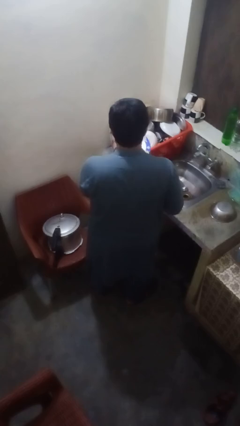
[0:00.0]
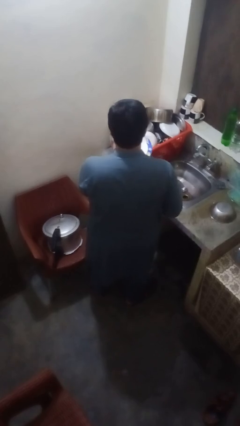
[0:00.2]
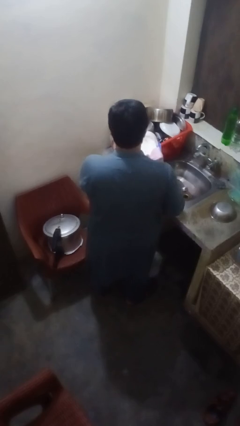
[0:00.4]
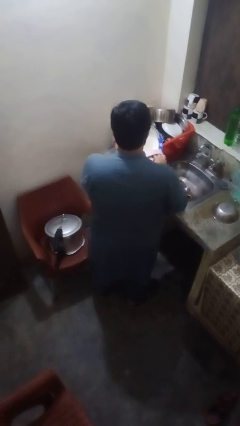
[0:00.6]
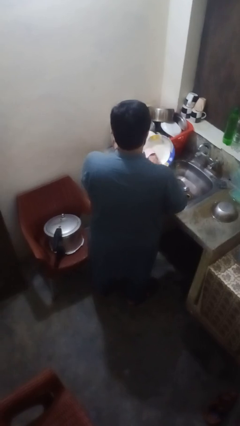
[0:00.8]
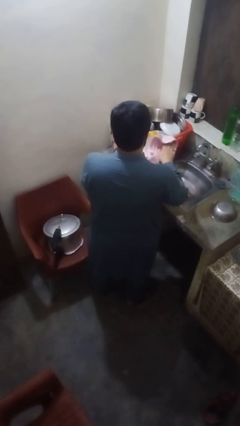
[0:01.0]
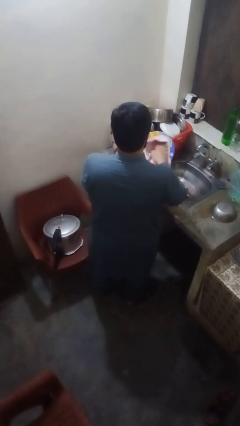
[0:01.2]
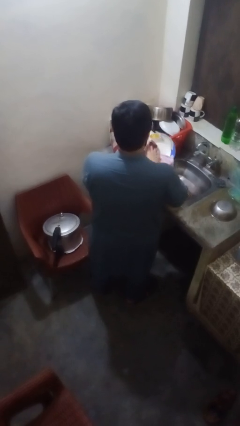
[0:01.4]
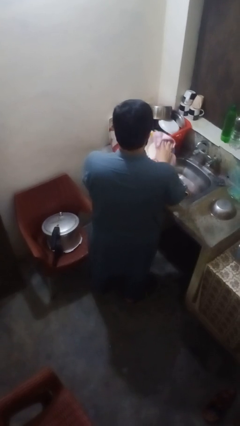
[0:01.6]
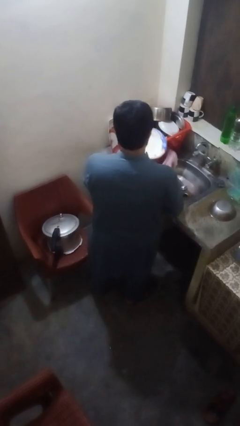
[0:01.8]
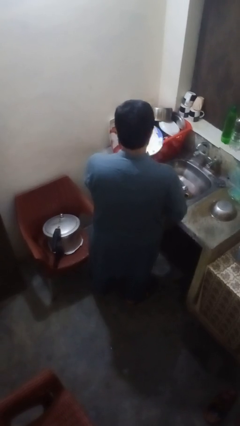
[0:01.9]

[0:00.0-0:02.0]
person dries dish

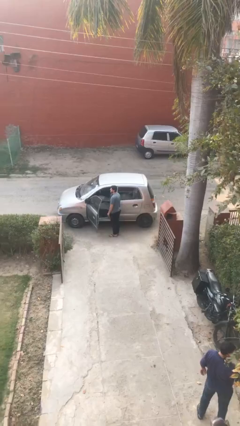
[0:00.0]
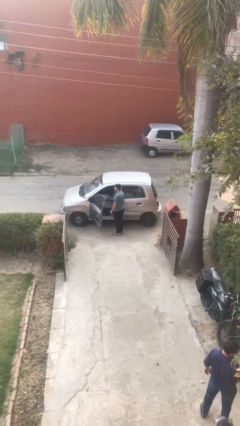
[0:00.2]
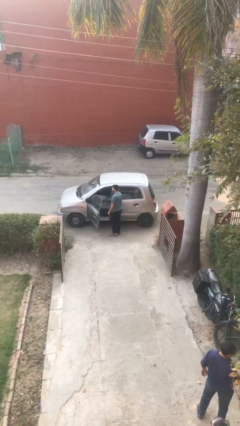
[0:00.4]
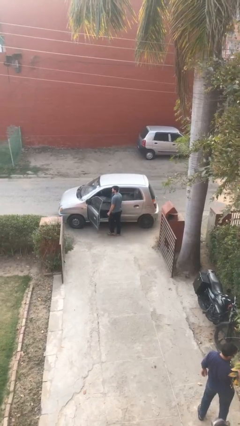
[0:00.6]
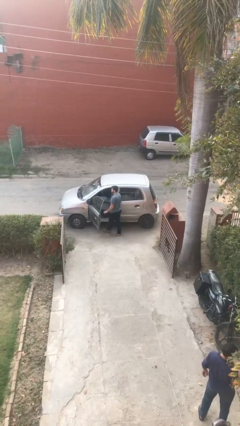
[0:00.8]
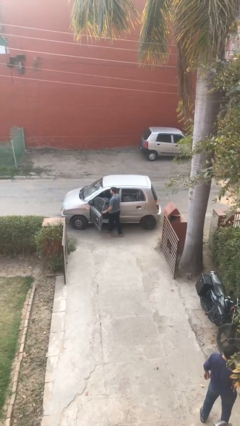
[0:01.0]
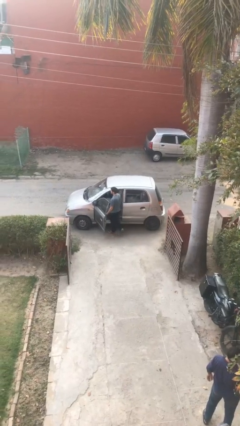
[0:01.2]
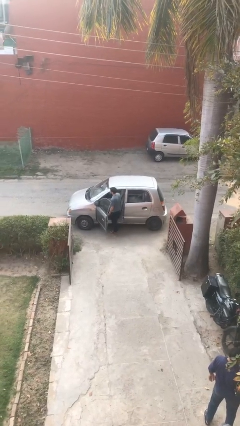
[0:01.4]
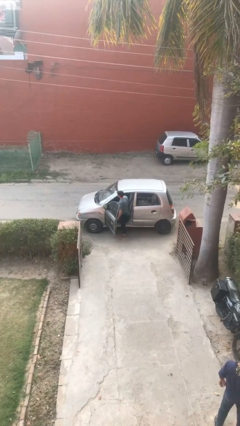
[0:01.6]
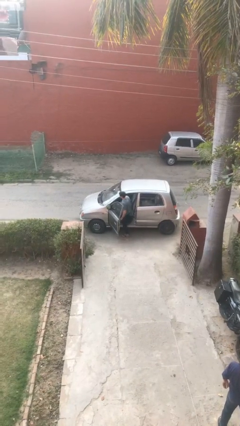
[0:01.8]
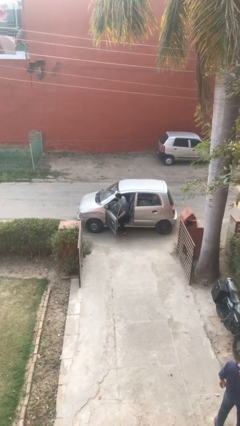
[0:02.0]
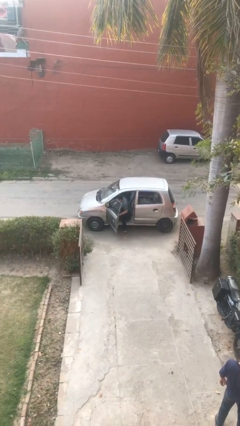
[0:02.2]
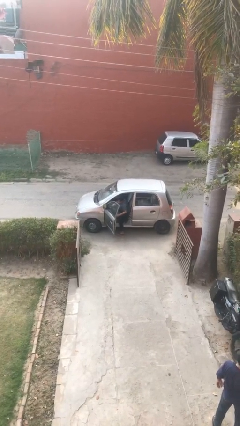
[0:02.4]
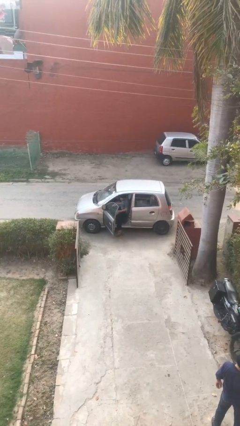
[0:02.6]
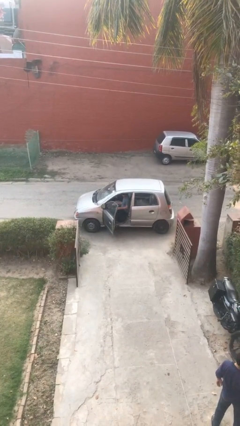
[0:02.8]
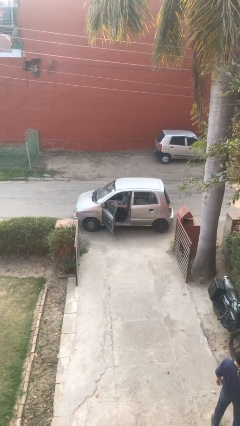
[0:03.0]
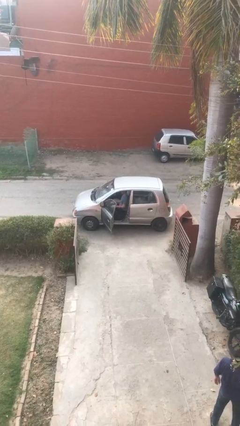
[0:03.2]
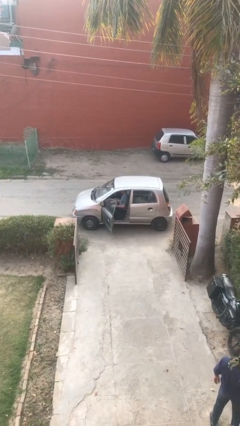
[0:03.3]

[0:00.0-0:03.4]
person enters car

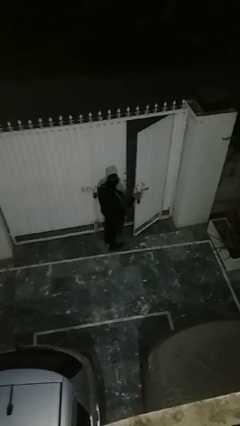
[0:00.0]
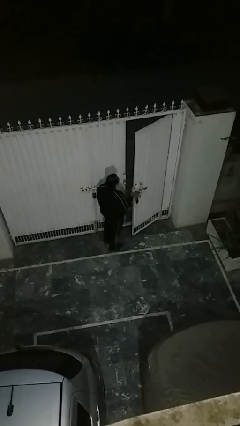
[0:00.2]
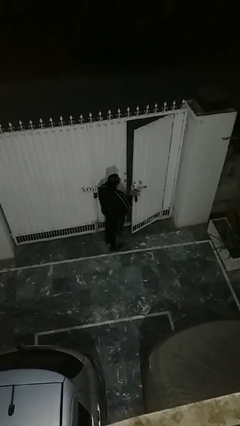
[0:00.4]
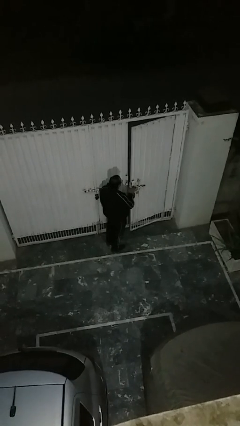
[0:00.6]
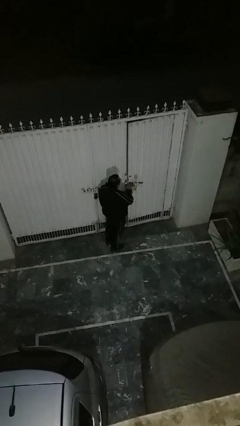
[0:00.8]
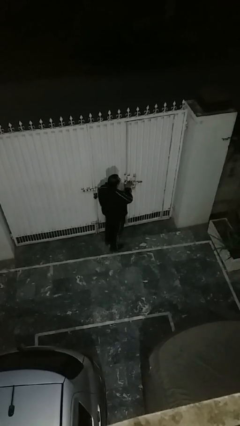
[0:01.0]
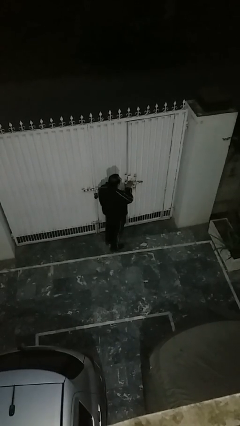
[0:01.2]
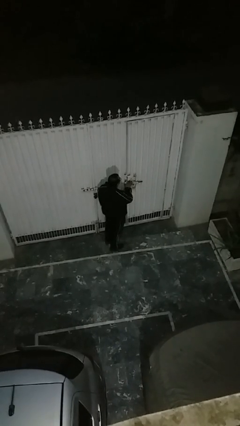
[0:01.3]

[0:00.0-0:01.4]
person closes facility door

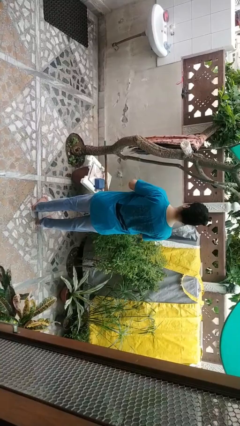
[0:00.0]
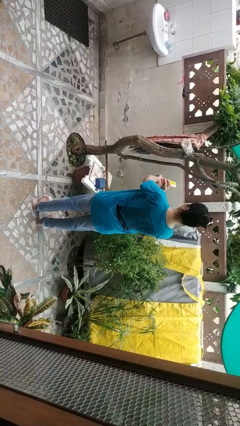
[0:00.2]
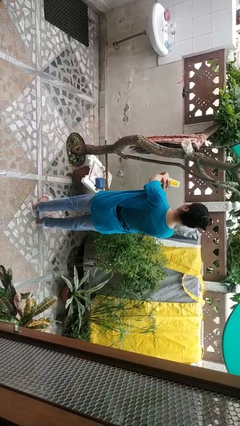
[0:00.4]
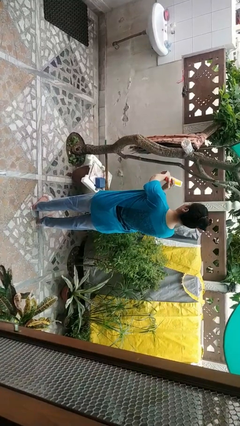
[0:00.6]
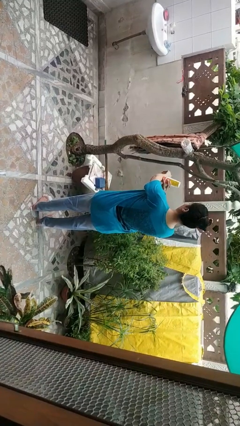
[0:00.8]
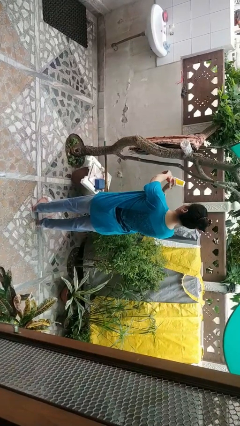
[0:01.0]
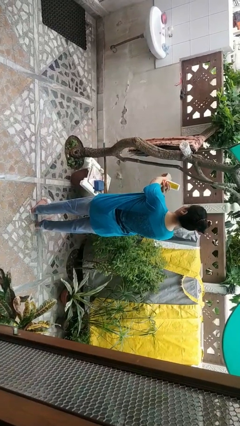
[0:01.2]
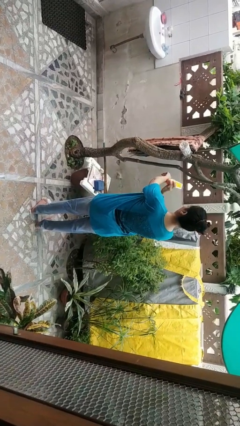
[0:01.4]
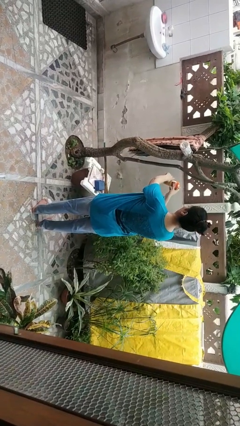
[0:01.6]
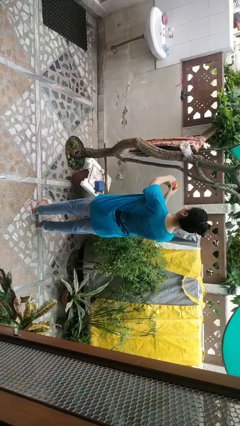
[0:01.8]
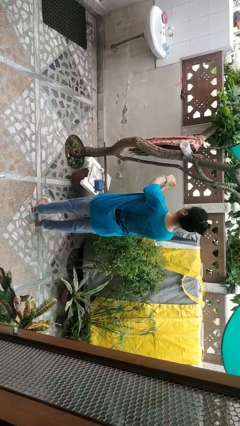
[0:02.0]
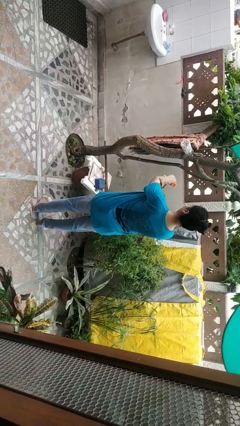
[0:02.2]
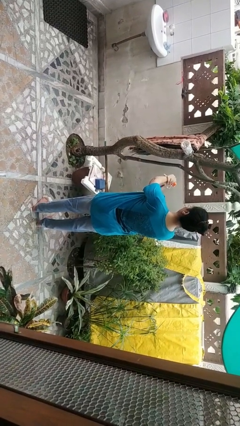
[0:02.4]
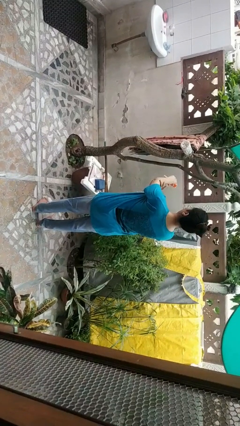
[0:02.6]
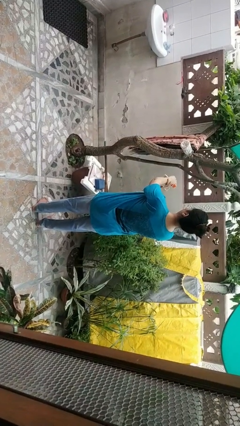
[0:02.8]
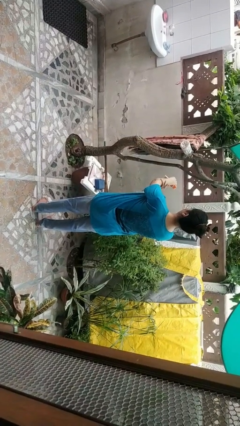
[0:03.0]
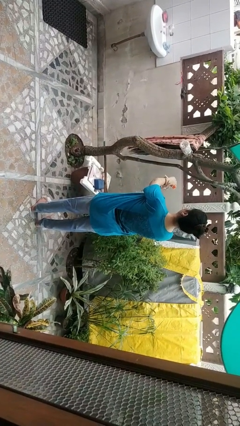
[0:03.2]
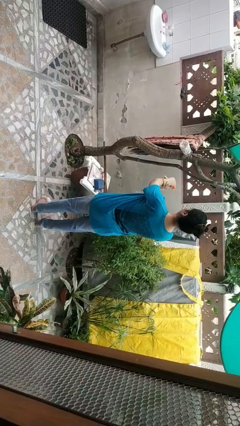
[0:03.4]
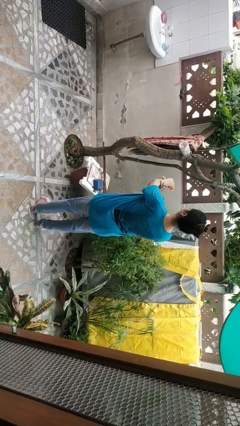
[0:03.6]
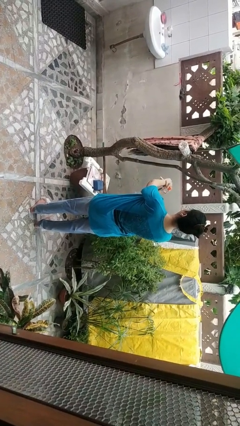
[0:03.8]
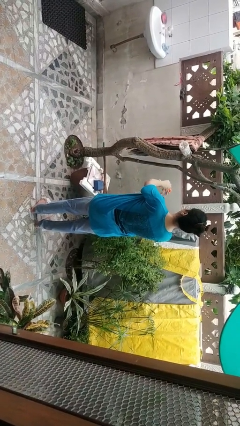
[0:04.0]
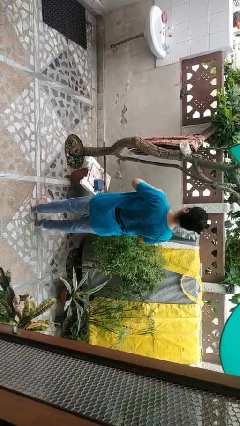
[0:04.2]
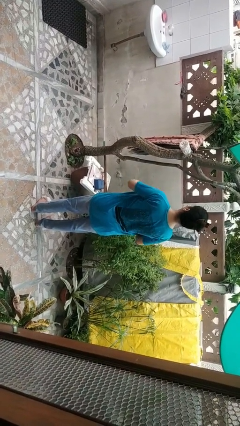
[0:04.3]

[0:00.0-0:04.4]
person applies sunscreen

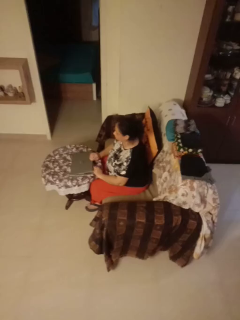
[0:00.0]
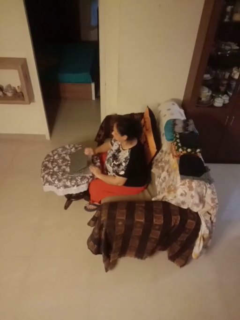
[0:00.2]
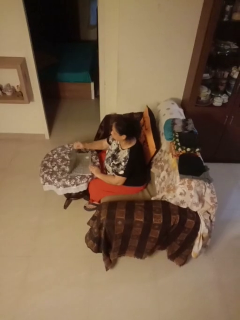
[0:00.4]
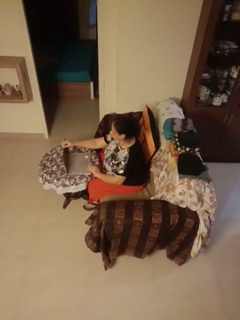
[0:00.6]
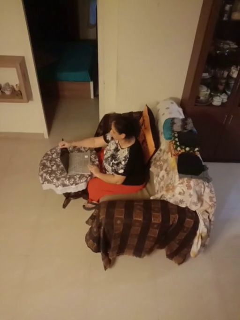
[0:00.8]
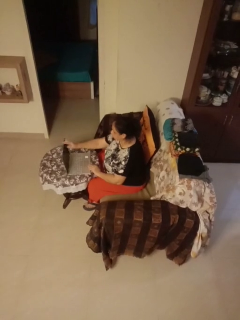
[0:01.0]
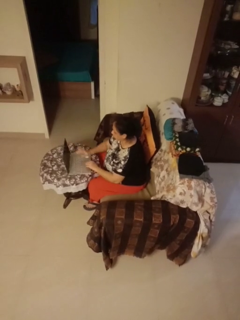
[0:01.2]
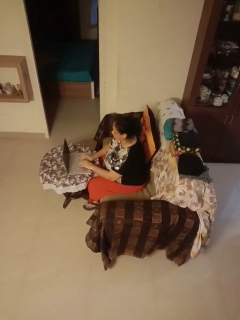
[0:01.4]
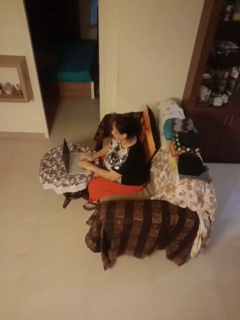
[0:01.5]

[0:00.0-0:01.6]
person opens laptop

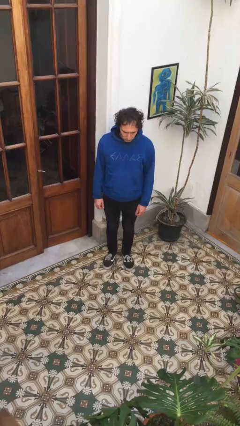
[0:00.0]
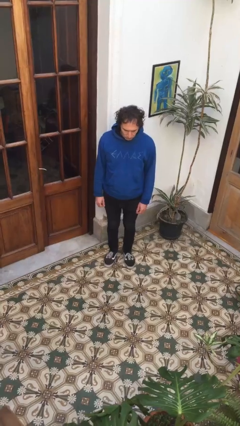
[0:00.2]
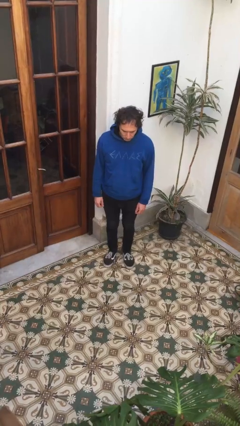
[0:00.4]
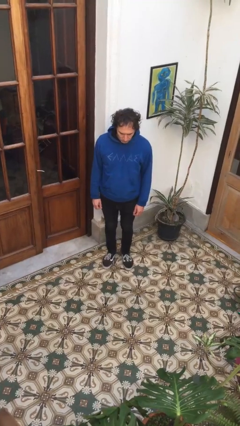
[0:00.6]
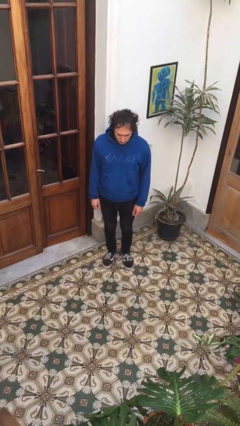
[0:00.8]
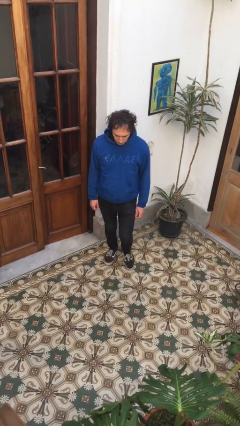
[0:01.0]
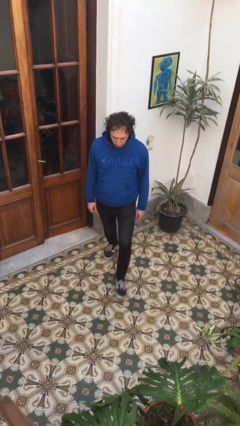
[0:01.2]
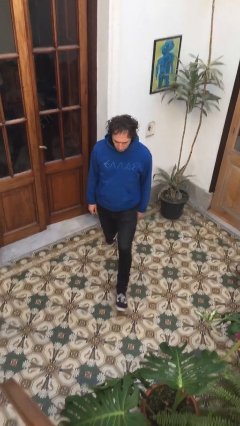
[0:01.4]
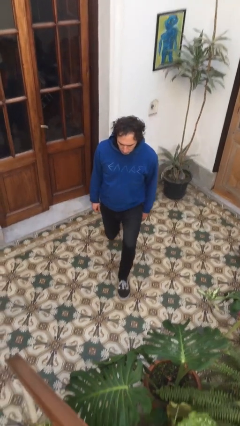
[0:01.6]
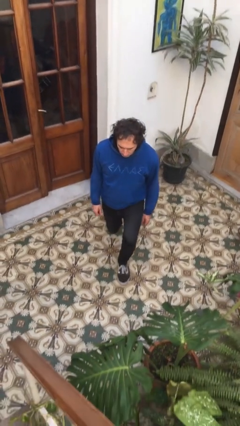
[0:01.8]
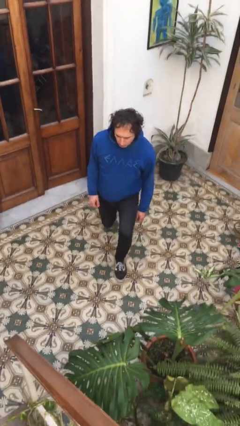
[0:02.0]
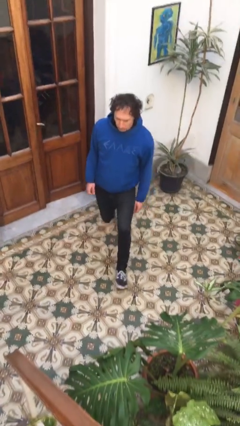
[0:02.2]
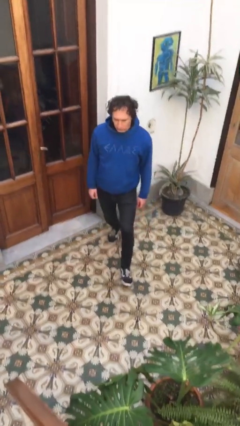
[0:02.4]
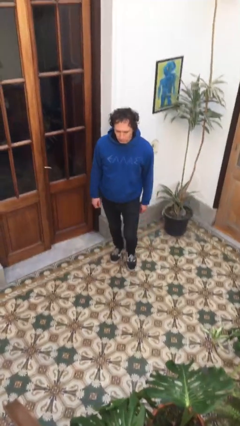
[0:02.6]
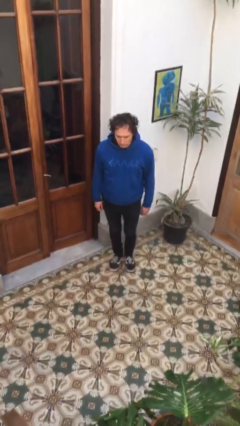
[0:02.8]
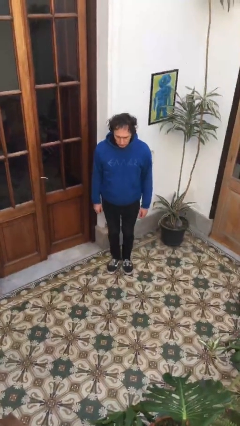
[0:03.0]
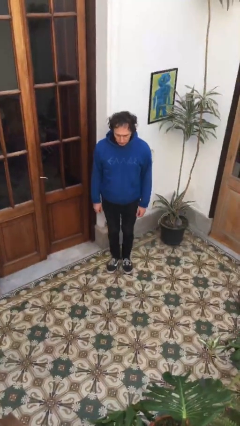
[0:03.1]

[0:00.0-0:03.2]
person exercises with lunges

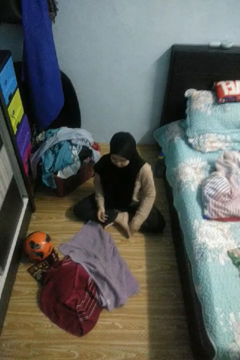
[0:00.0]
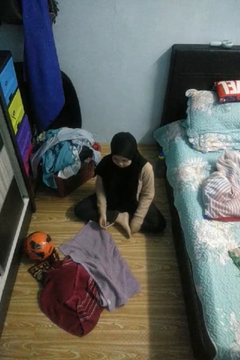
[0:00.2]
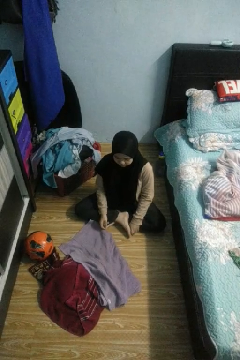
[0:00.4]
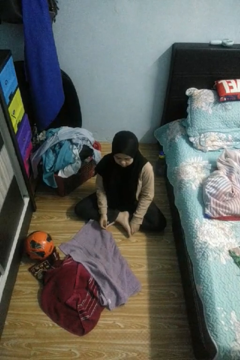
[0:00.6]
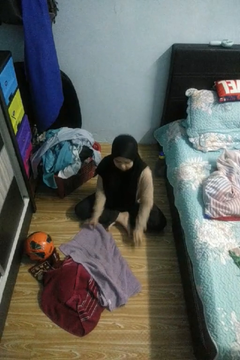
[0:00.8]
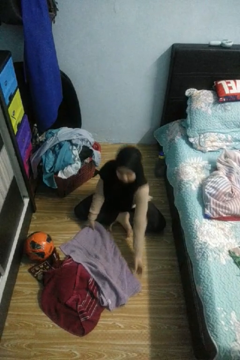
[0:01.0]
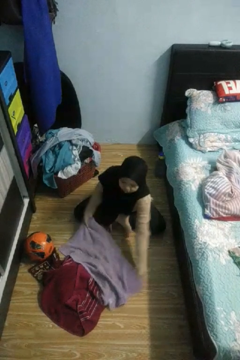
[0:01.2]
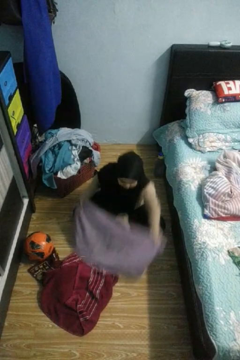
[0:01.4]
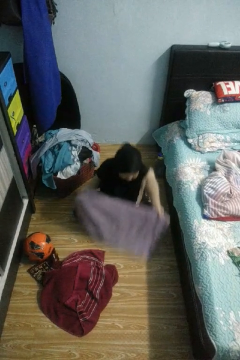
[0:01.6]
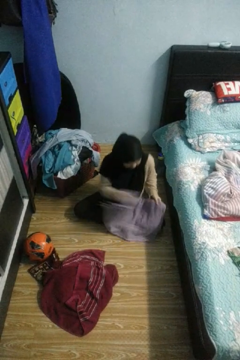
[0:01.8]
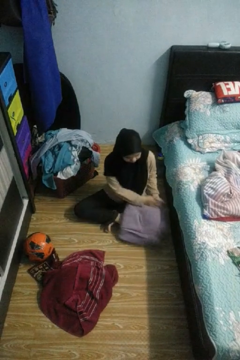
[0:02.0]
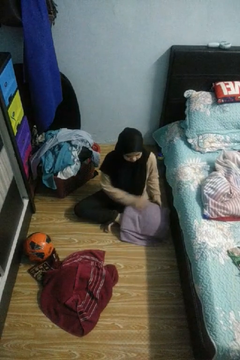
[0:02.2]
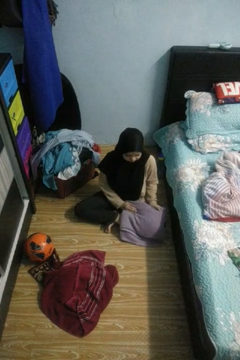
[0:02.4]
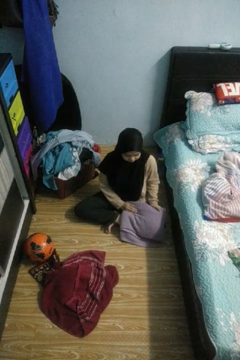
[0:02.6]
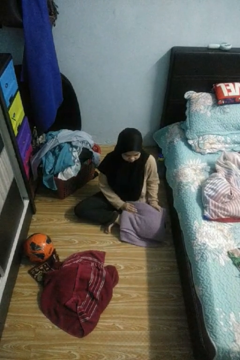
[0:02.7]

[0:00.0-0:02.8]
person folds towel
